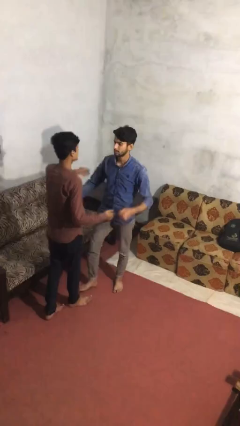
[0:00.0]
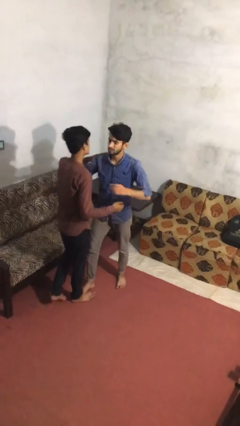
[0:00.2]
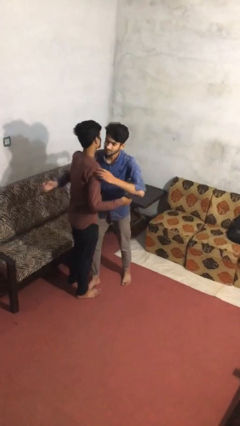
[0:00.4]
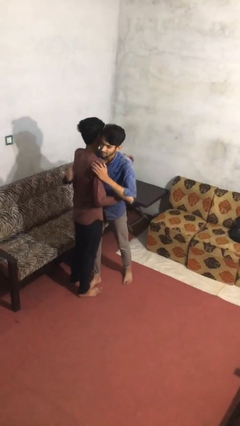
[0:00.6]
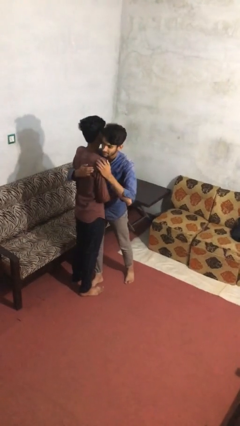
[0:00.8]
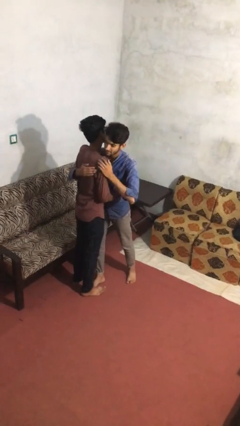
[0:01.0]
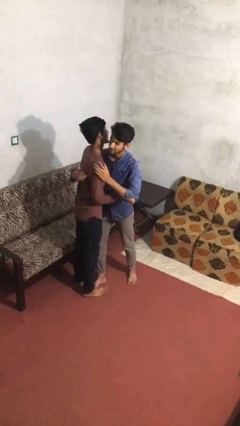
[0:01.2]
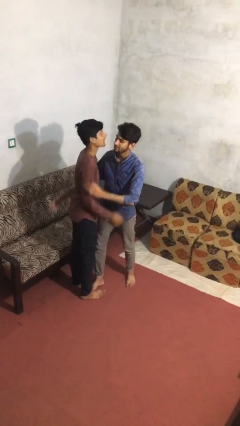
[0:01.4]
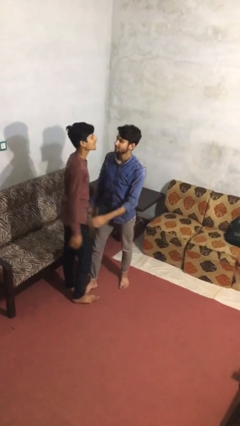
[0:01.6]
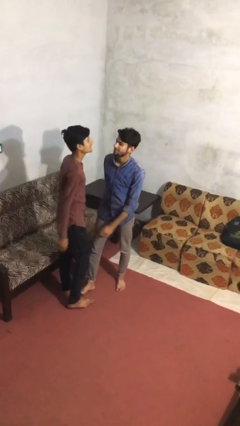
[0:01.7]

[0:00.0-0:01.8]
person embraces person

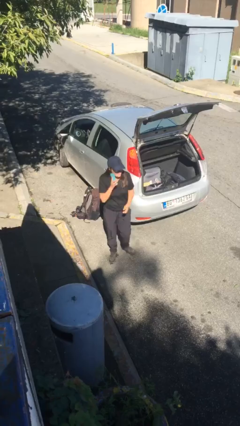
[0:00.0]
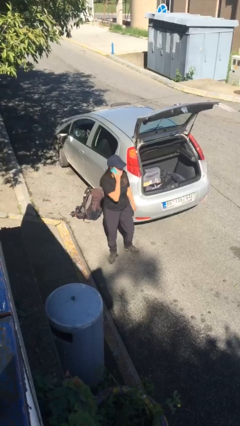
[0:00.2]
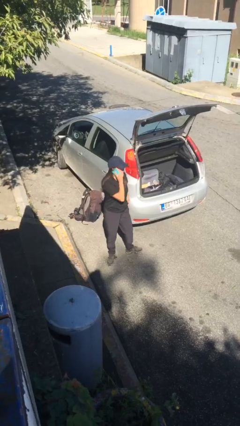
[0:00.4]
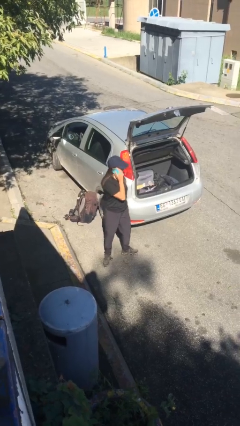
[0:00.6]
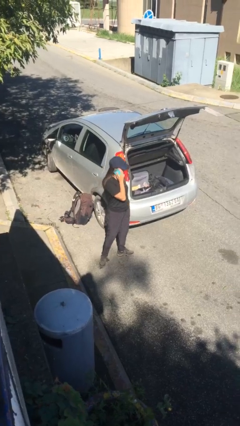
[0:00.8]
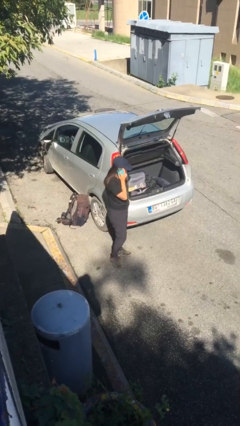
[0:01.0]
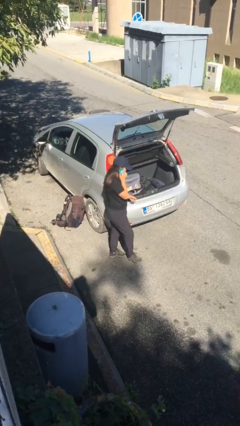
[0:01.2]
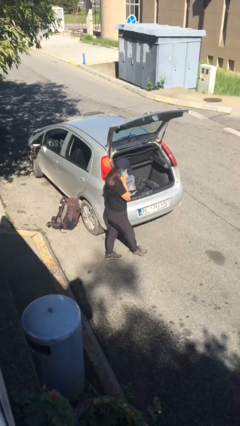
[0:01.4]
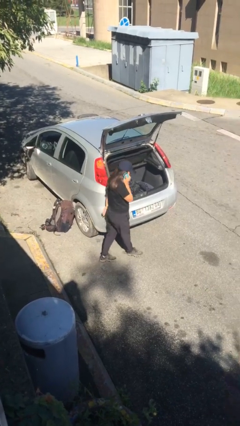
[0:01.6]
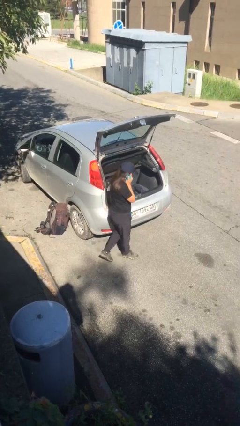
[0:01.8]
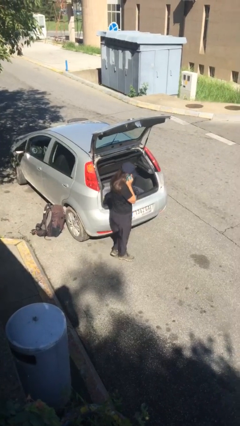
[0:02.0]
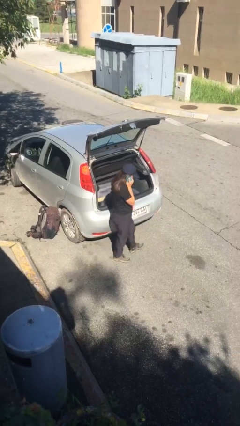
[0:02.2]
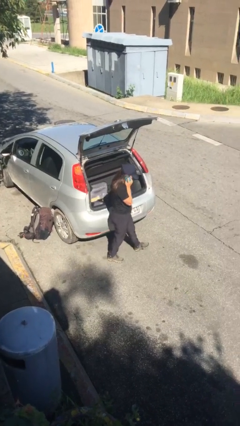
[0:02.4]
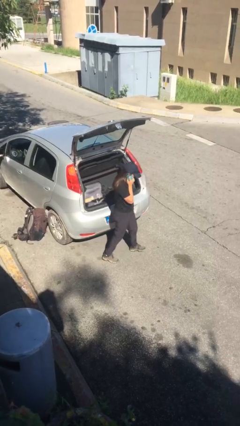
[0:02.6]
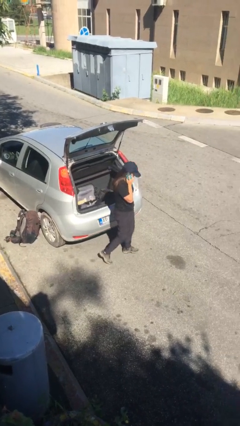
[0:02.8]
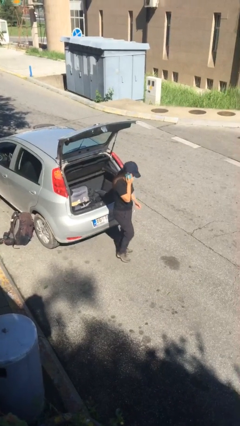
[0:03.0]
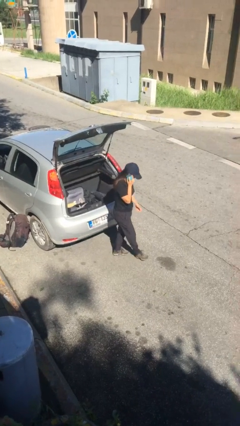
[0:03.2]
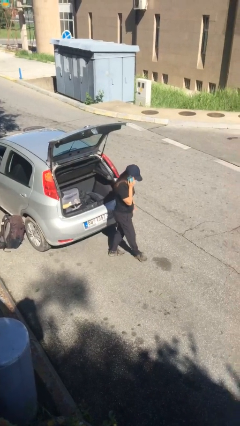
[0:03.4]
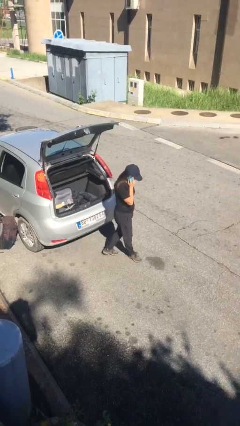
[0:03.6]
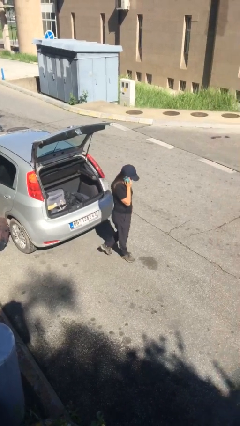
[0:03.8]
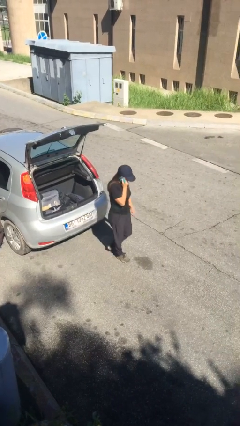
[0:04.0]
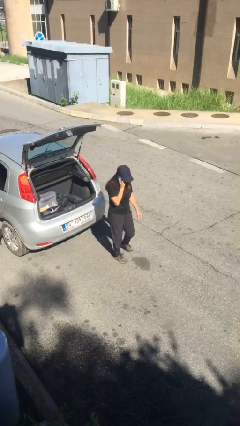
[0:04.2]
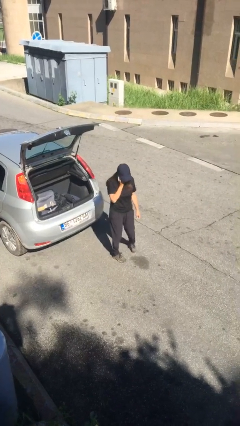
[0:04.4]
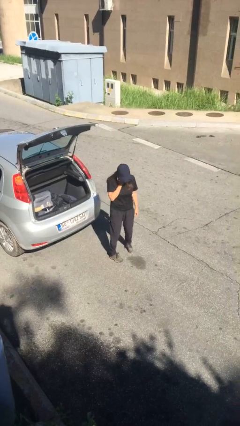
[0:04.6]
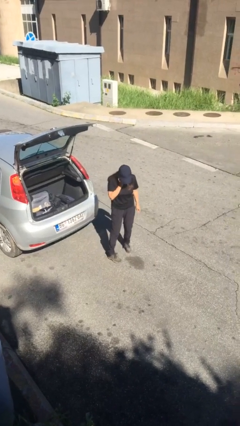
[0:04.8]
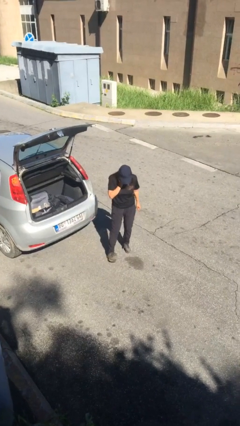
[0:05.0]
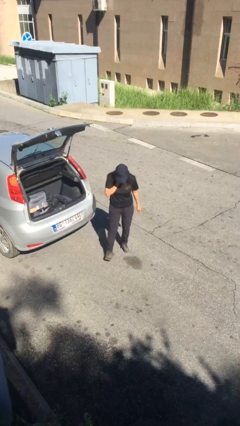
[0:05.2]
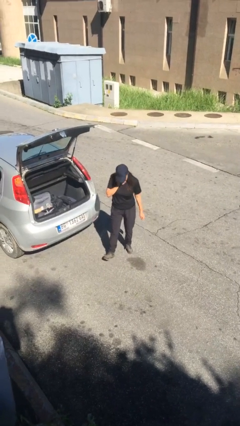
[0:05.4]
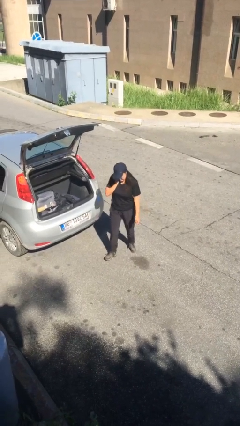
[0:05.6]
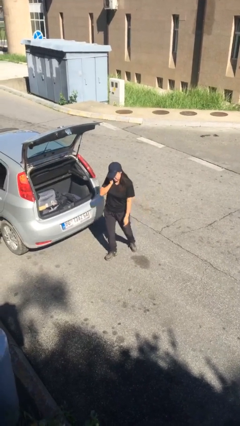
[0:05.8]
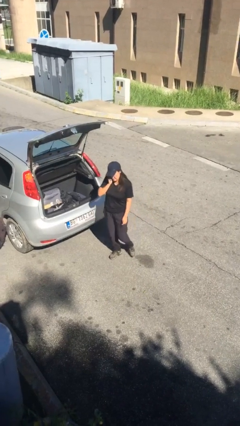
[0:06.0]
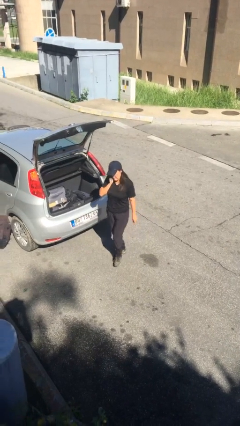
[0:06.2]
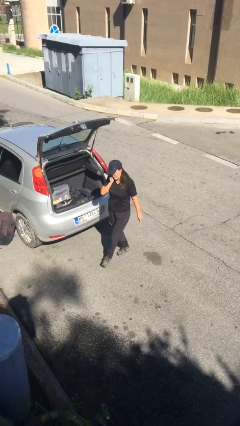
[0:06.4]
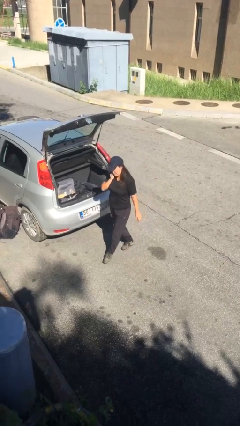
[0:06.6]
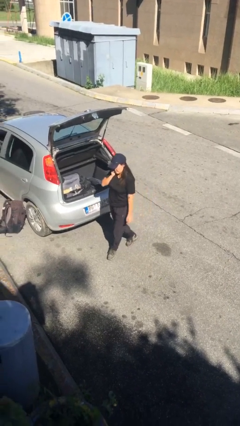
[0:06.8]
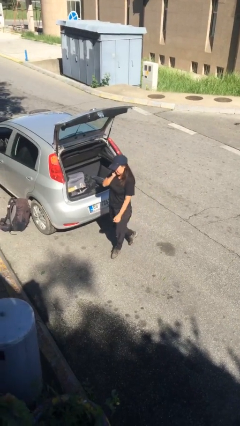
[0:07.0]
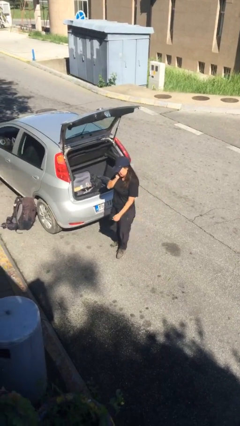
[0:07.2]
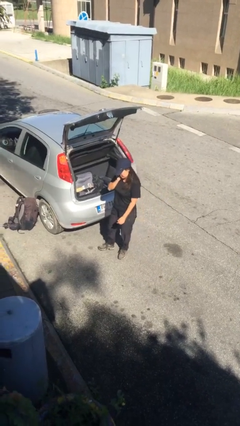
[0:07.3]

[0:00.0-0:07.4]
person talks on phone

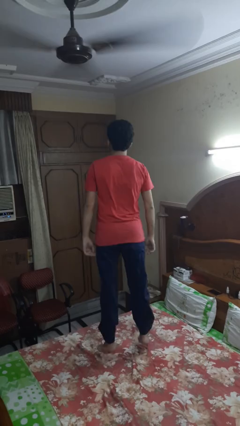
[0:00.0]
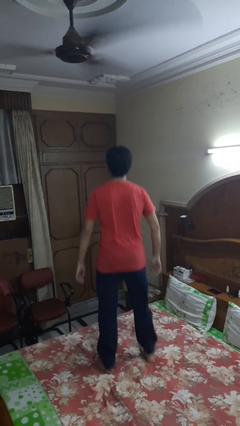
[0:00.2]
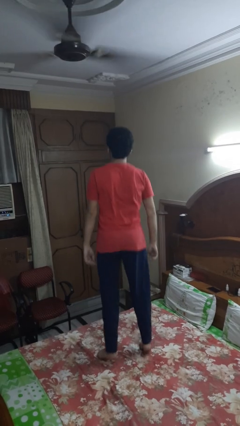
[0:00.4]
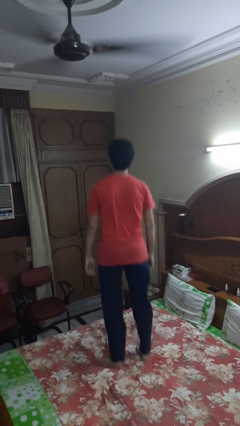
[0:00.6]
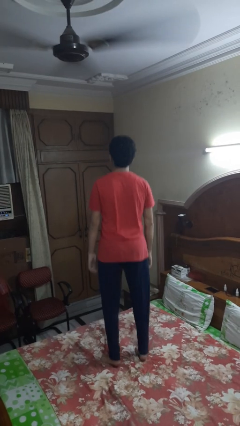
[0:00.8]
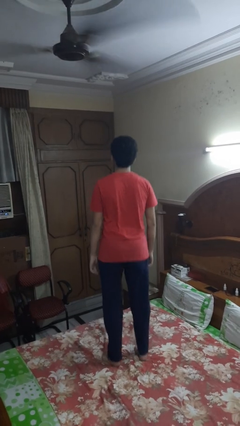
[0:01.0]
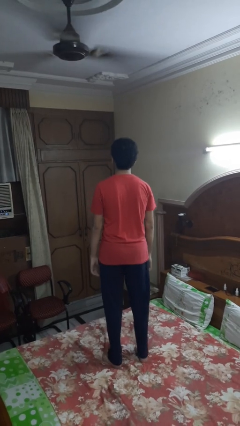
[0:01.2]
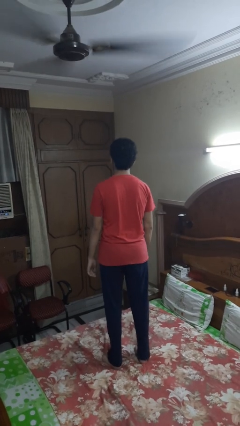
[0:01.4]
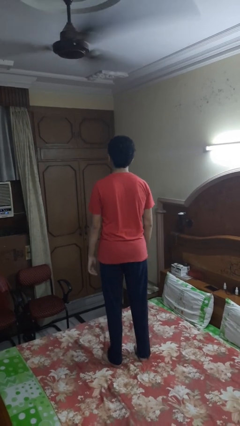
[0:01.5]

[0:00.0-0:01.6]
person jumps on bed

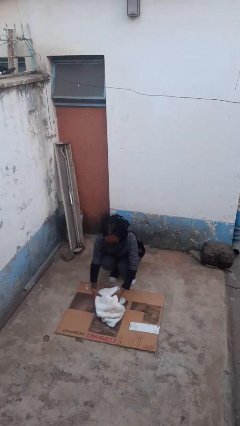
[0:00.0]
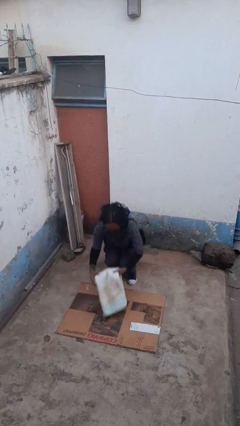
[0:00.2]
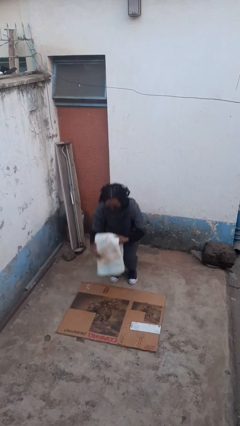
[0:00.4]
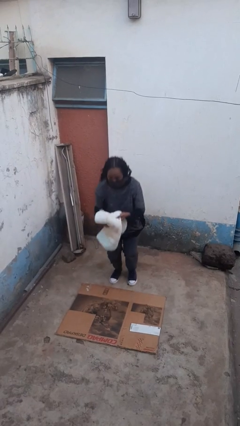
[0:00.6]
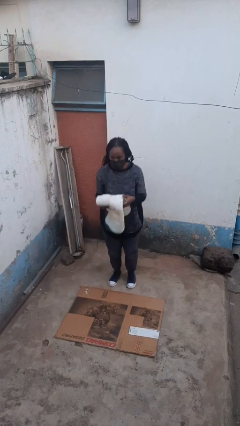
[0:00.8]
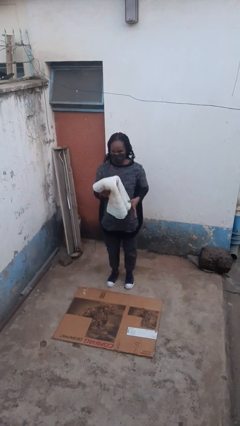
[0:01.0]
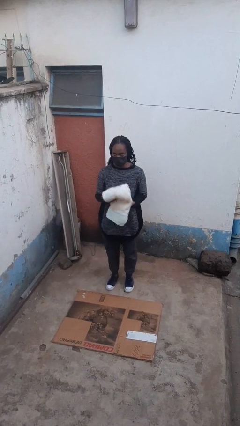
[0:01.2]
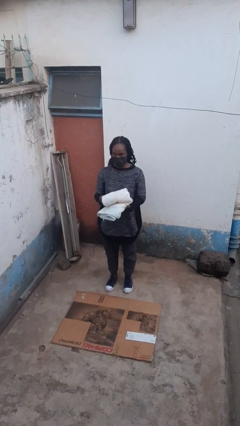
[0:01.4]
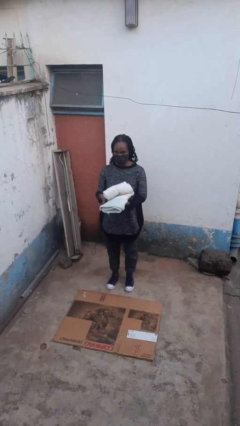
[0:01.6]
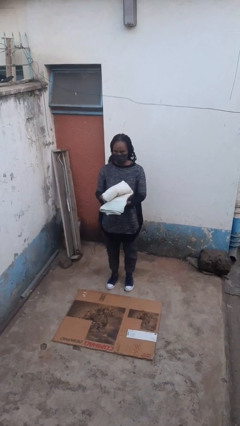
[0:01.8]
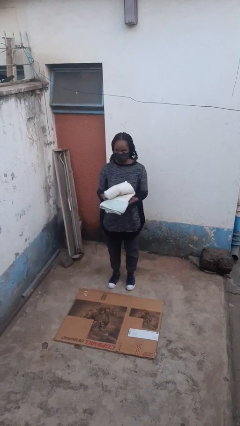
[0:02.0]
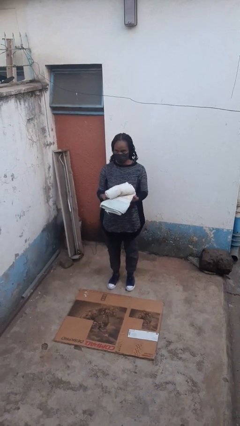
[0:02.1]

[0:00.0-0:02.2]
person picks up object from floor

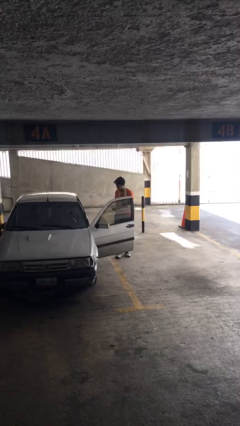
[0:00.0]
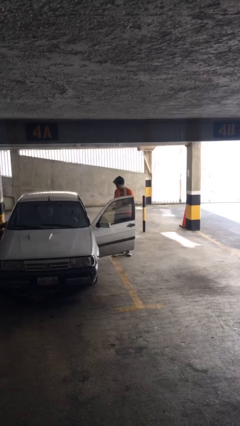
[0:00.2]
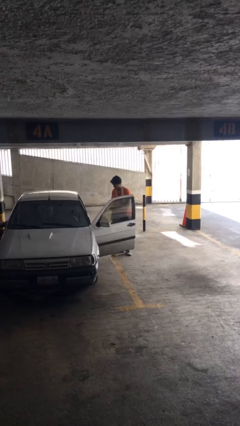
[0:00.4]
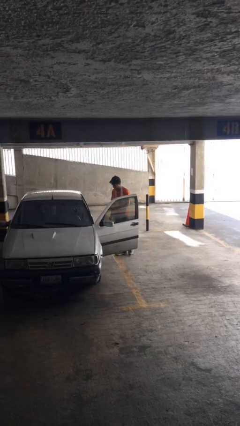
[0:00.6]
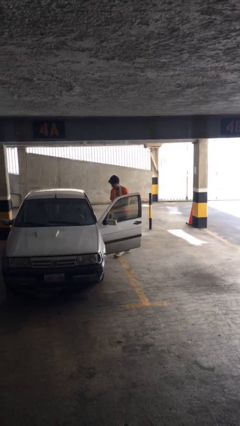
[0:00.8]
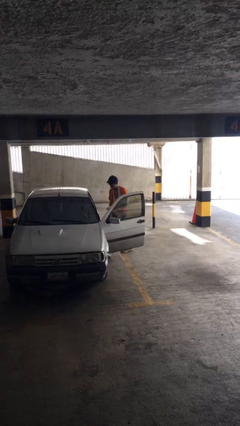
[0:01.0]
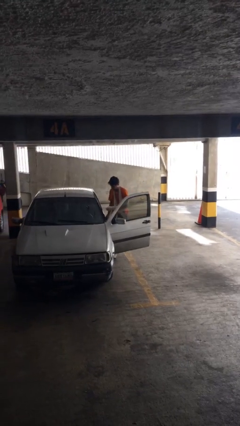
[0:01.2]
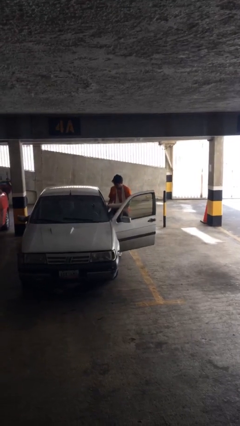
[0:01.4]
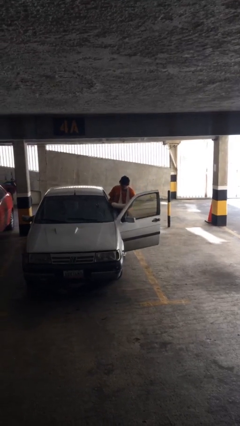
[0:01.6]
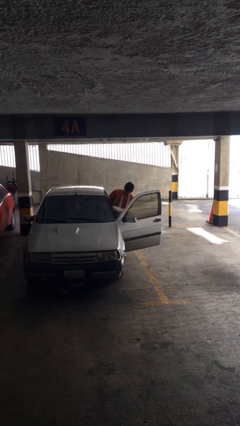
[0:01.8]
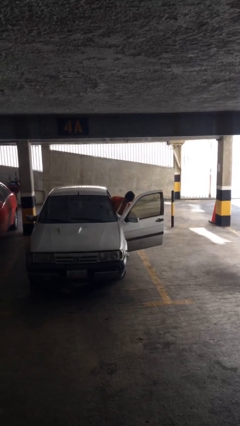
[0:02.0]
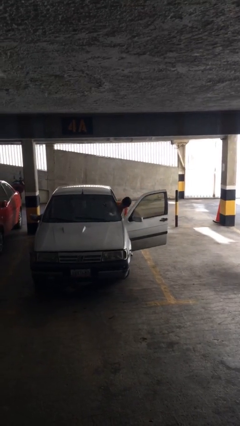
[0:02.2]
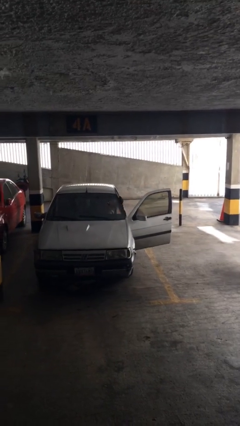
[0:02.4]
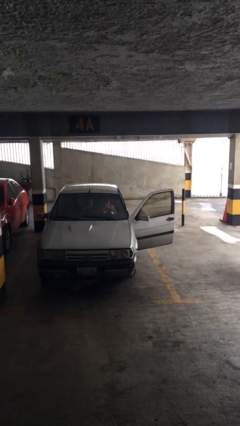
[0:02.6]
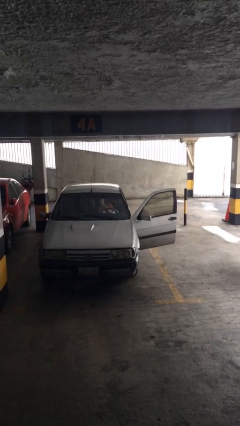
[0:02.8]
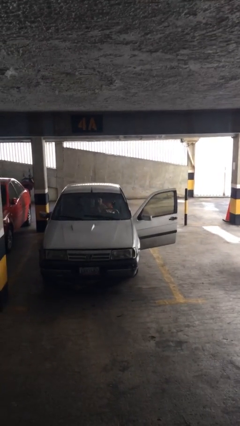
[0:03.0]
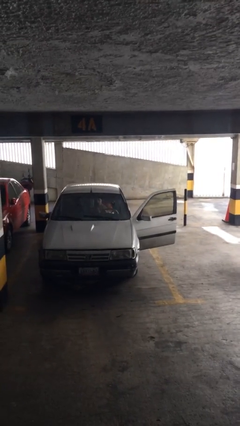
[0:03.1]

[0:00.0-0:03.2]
person enters car

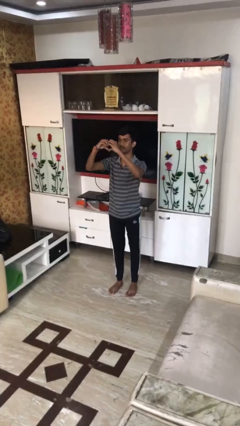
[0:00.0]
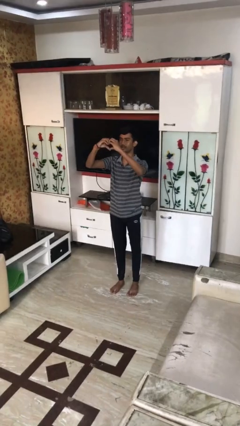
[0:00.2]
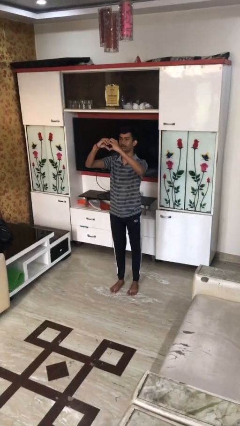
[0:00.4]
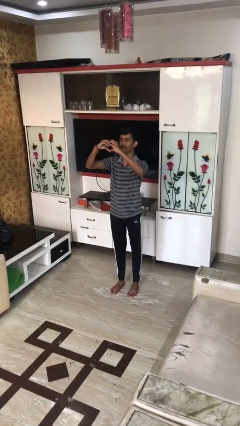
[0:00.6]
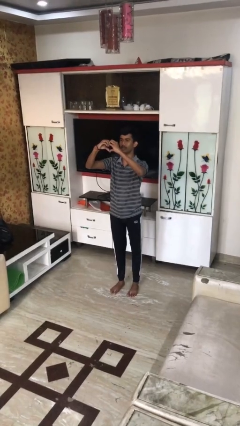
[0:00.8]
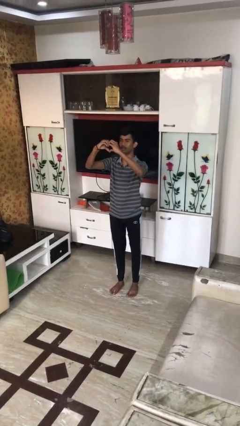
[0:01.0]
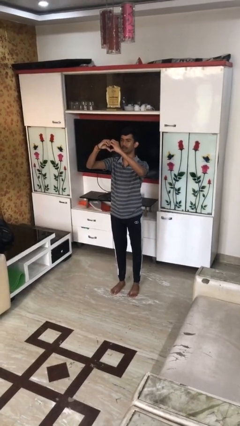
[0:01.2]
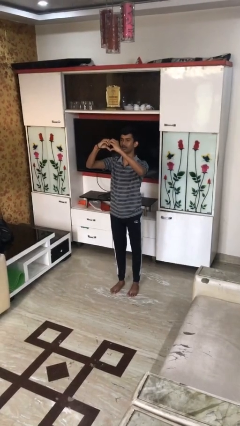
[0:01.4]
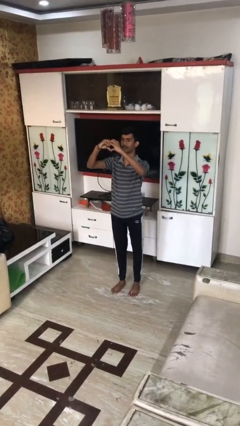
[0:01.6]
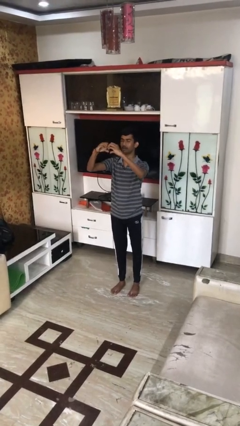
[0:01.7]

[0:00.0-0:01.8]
person gestures heart
